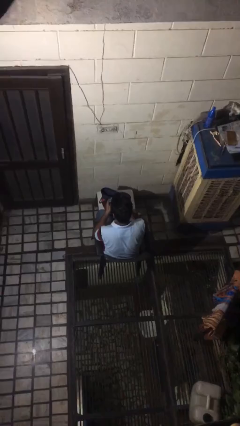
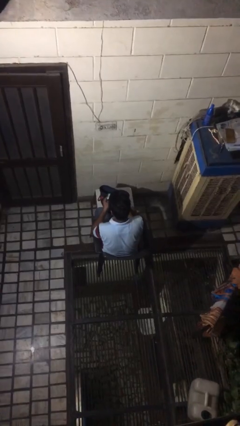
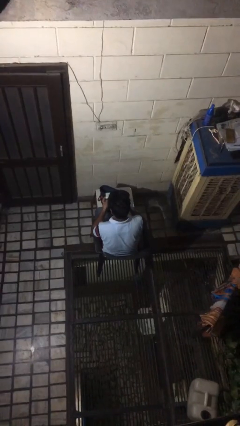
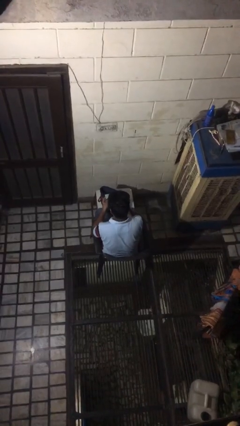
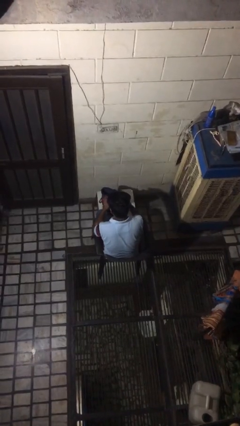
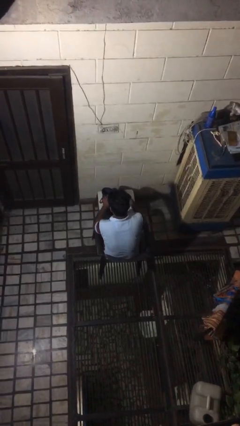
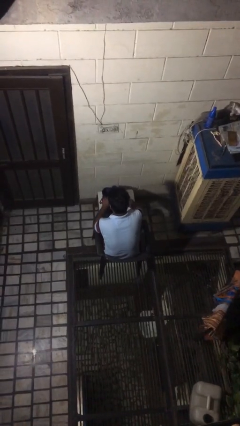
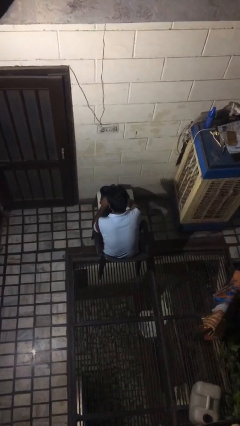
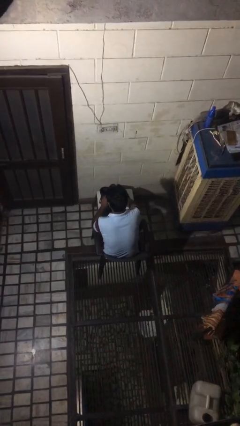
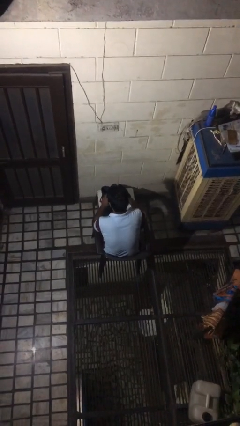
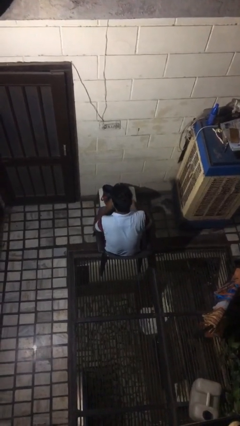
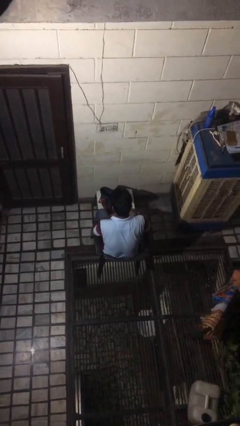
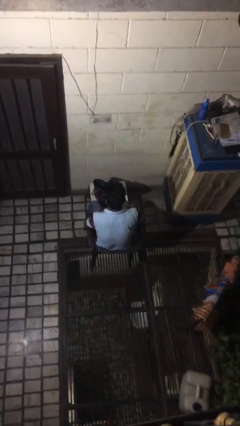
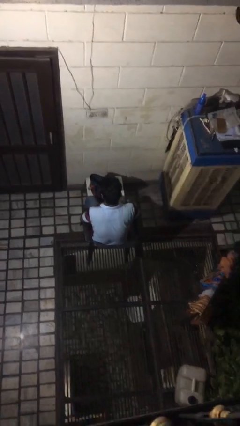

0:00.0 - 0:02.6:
person puts object into bag

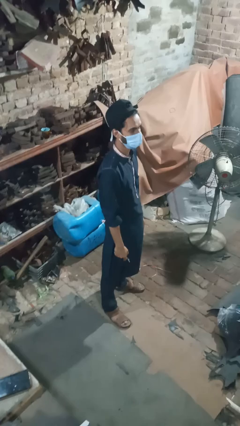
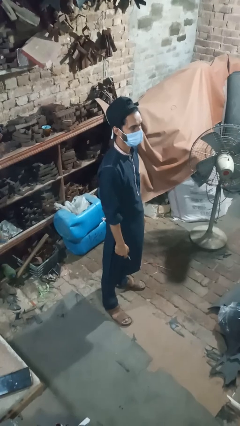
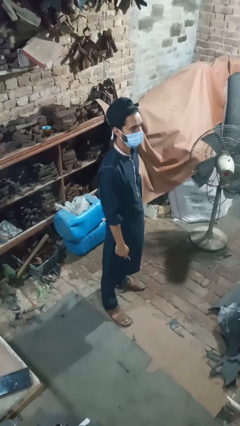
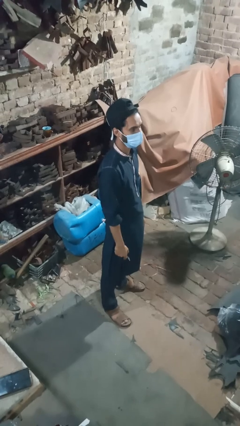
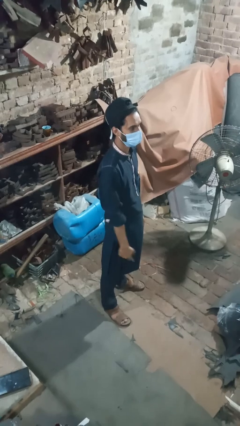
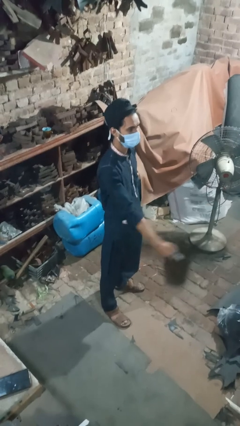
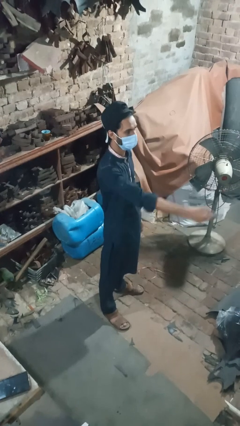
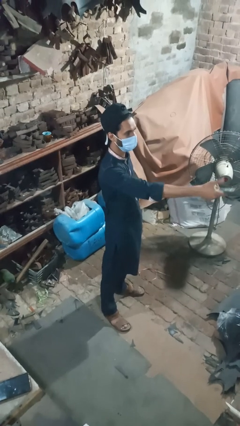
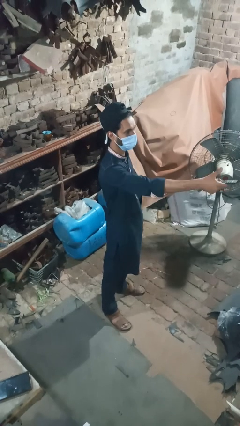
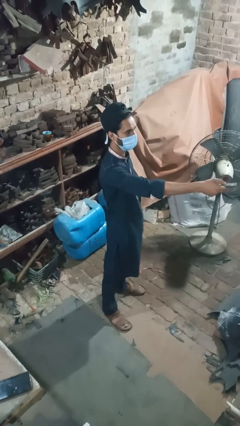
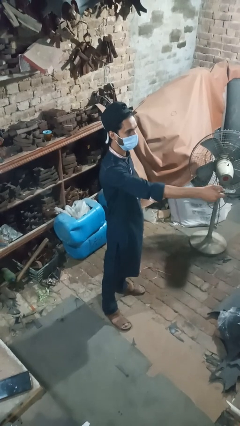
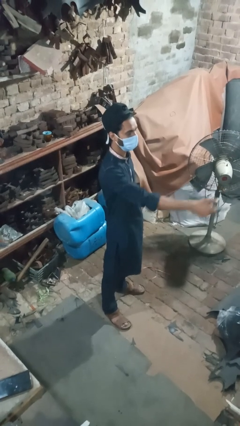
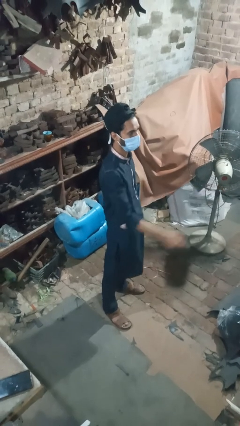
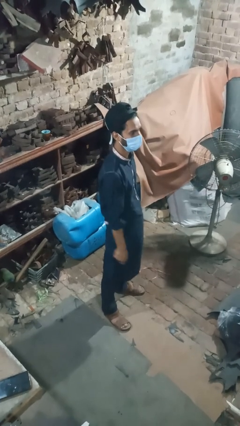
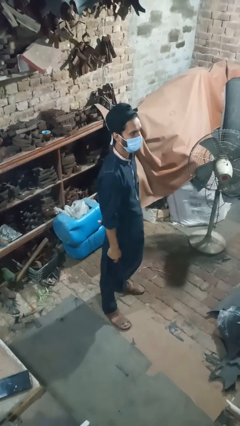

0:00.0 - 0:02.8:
person uses television remote

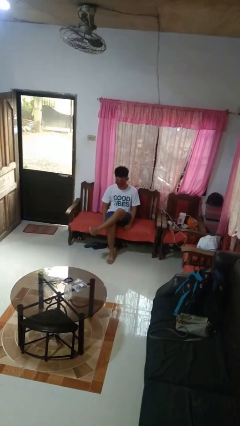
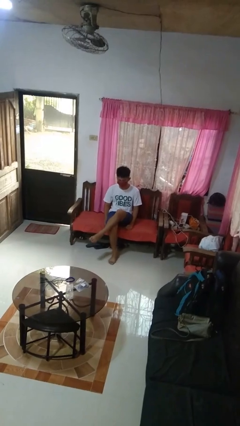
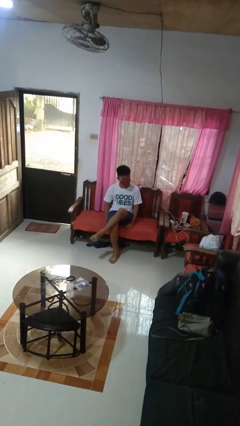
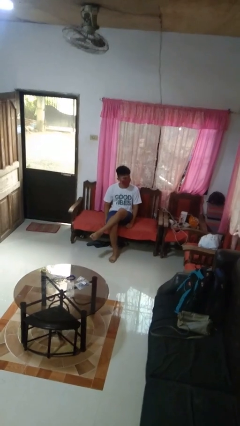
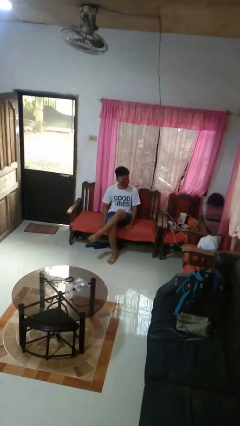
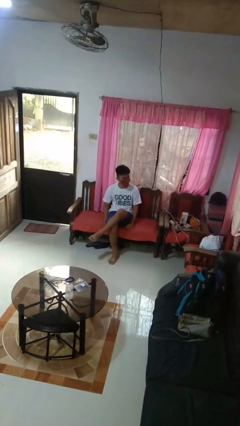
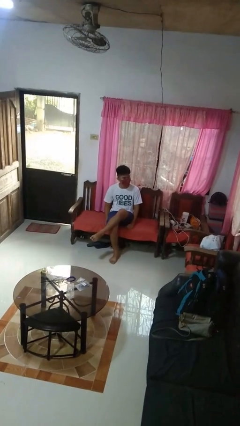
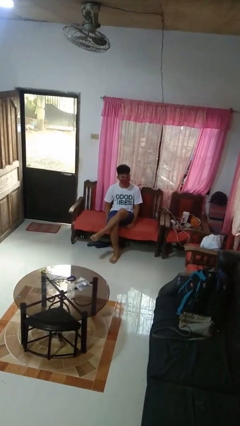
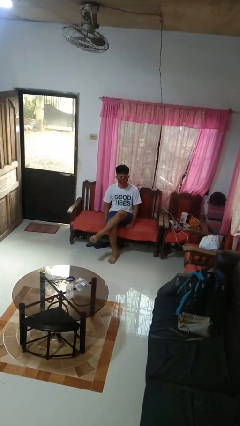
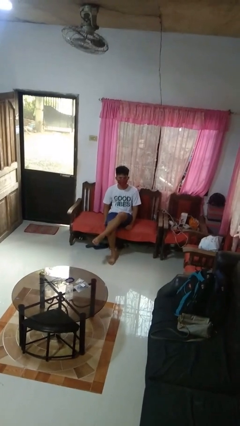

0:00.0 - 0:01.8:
person crosses legs

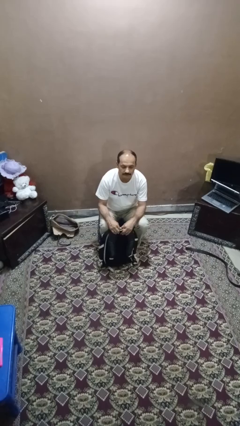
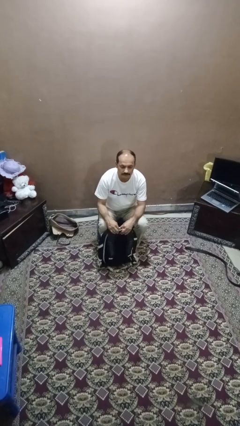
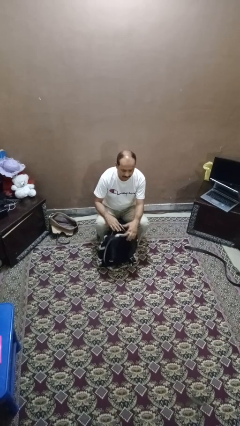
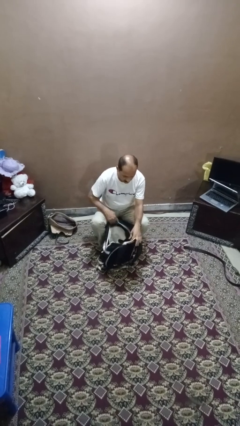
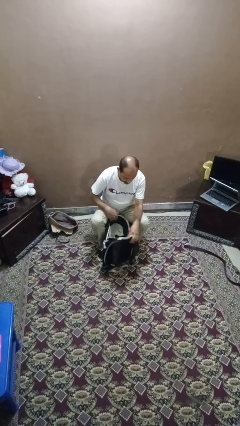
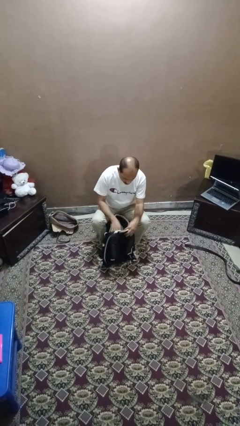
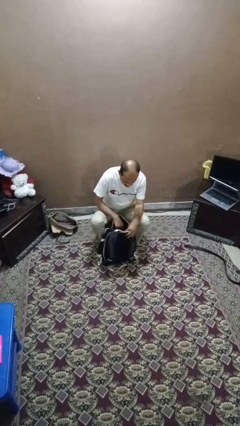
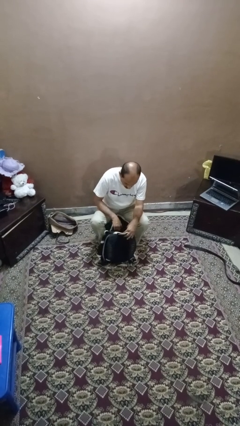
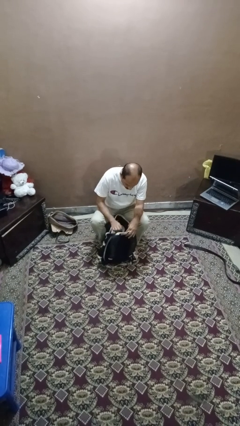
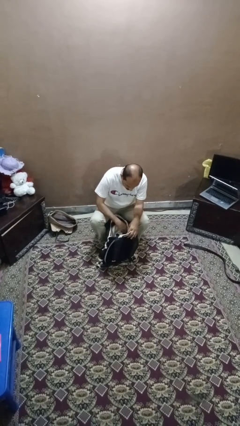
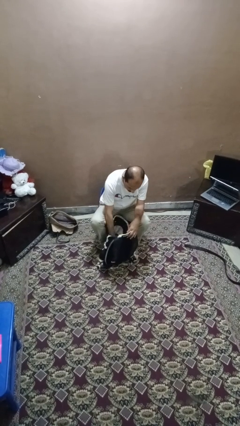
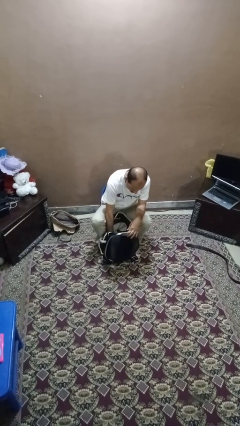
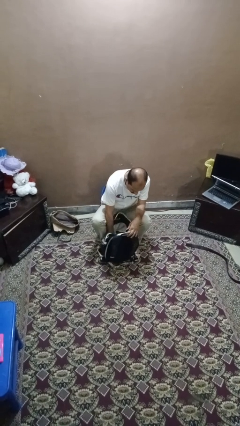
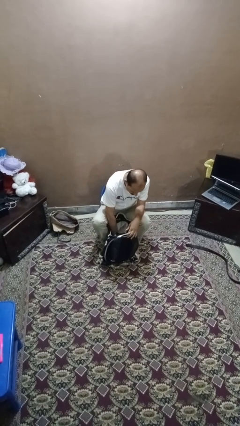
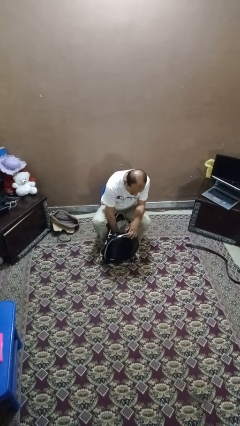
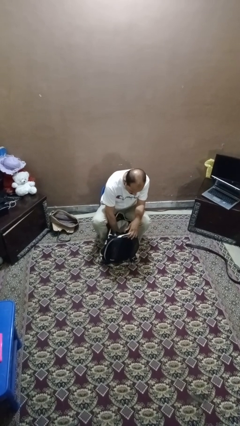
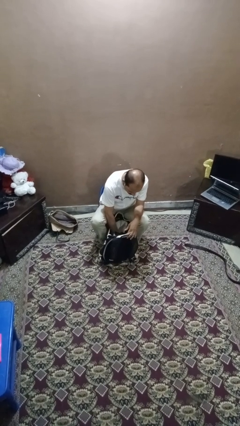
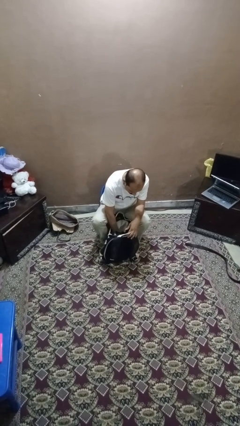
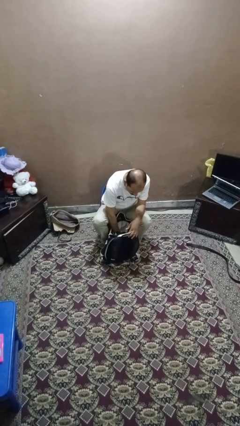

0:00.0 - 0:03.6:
person searches in backpack

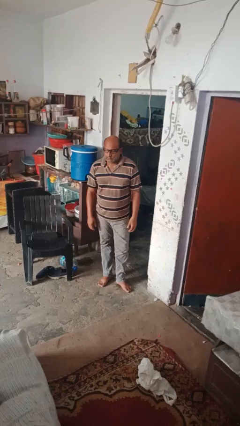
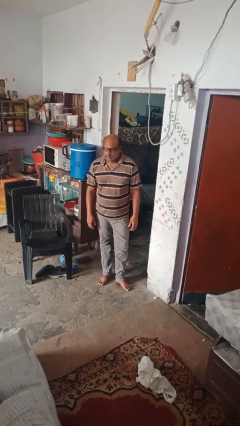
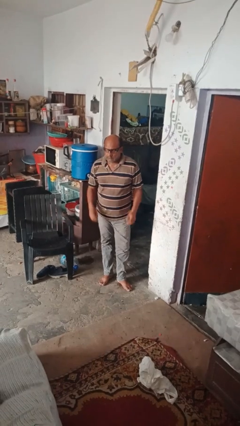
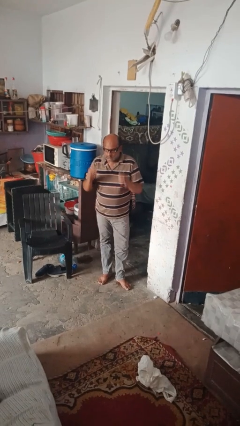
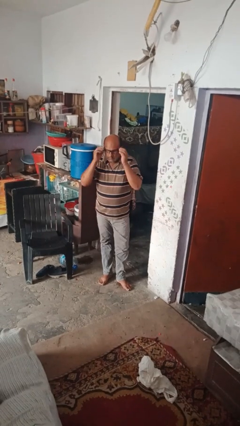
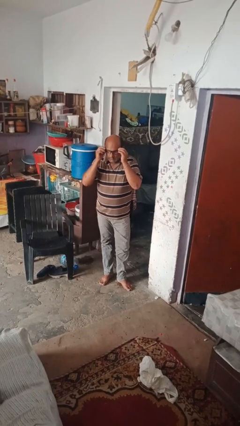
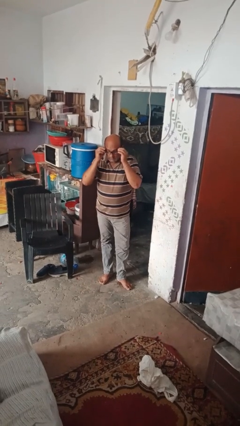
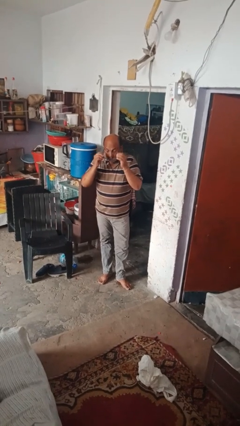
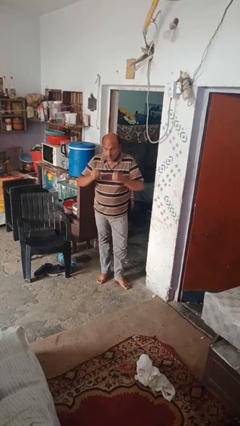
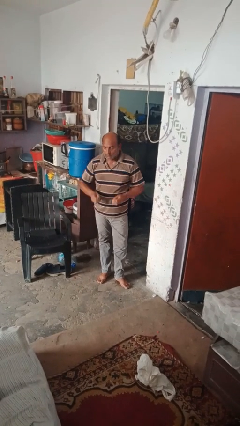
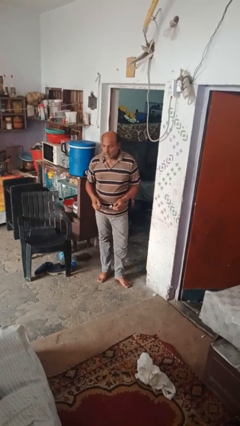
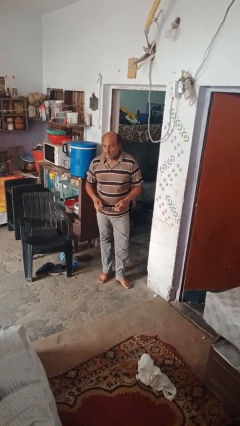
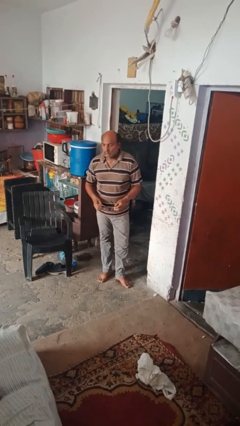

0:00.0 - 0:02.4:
person takes off glasses

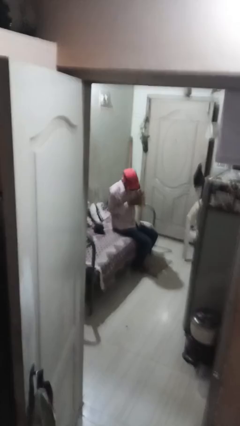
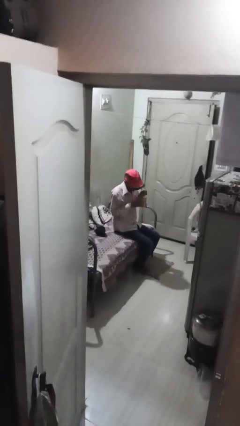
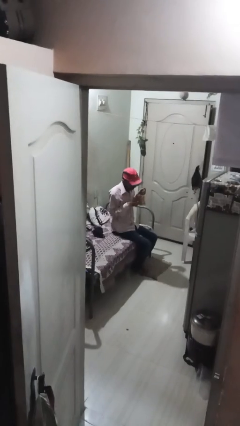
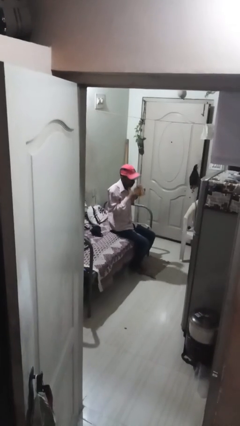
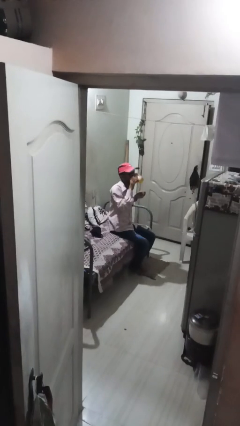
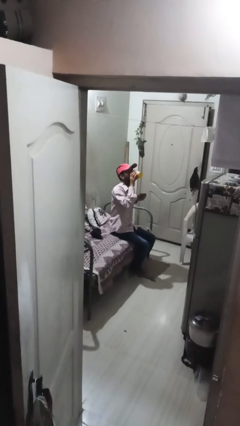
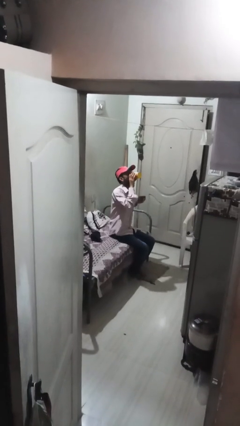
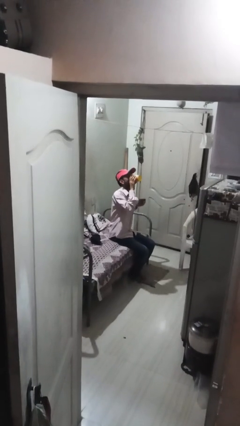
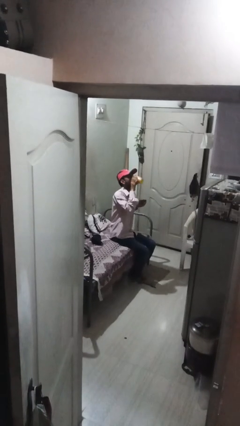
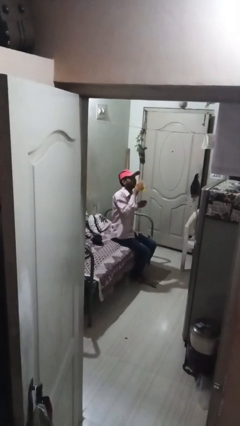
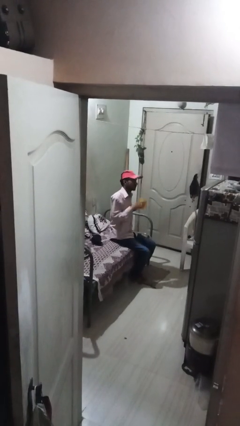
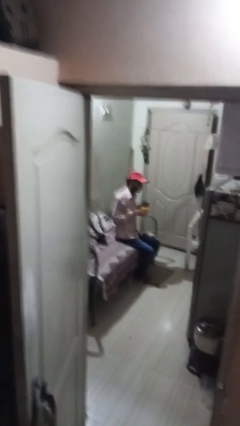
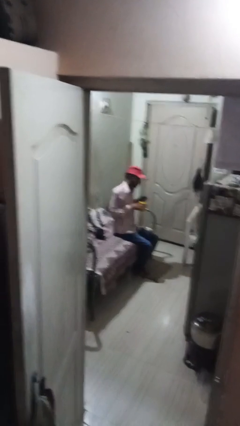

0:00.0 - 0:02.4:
person drinks from mug

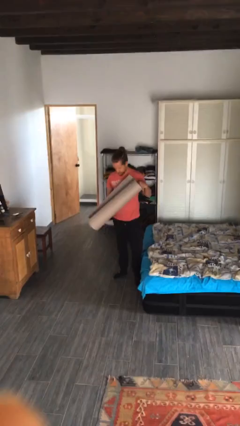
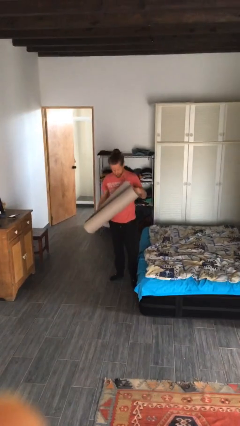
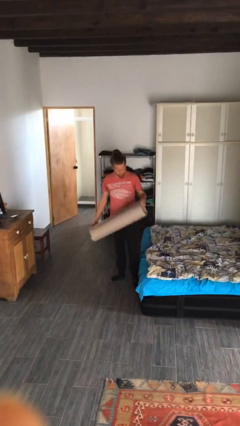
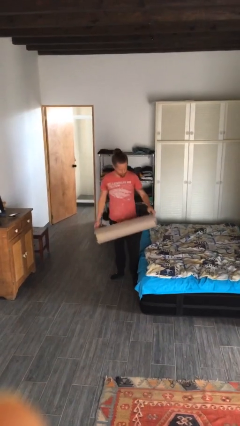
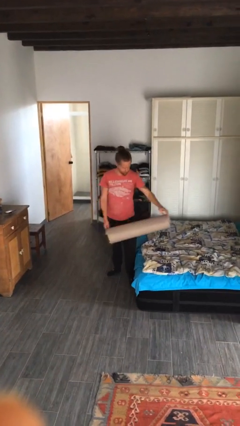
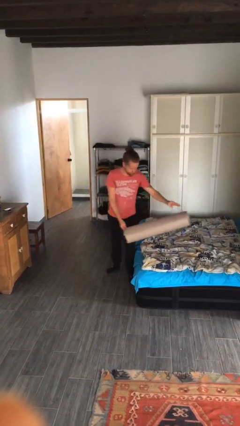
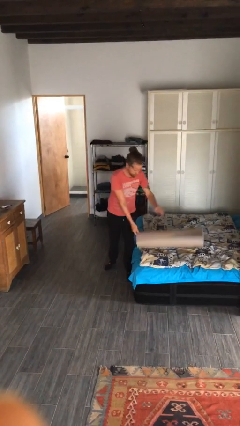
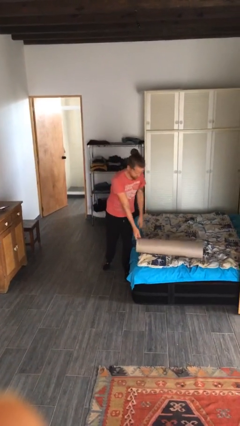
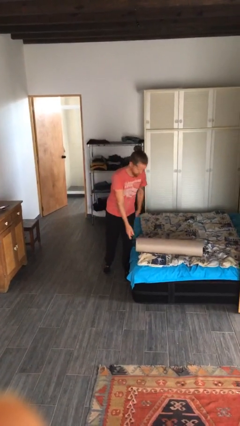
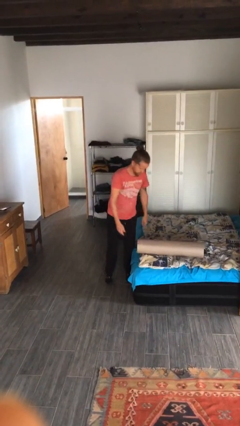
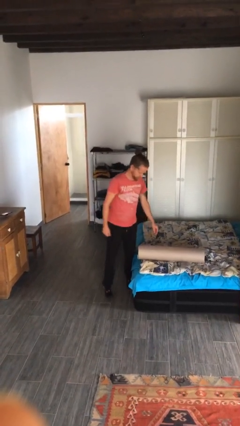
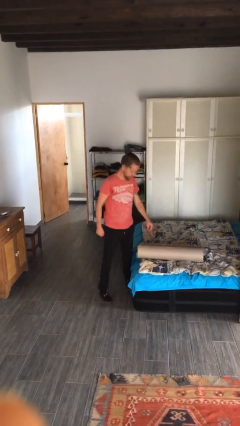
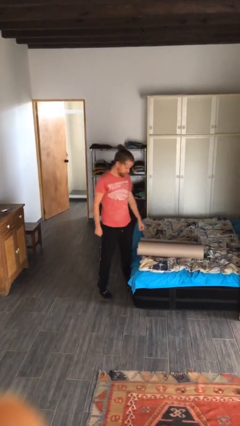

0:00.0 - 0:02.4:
person puts down object on bed
